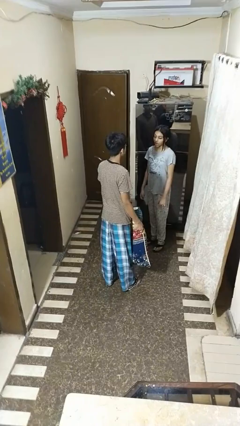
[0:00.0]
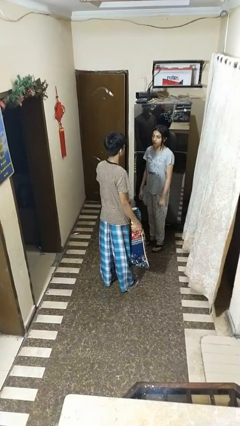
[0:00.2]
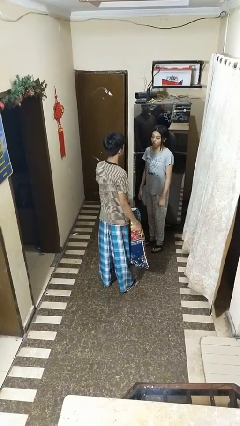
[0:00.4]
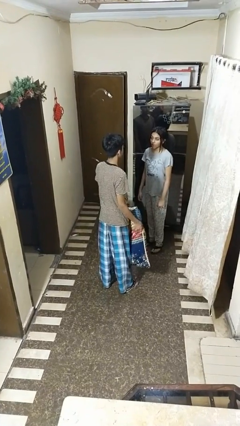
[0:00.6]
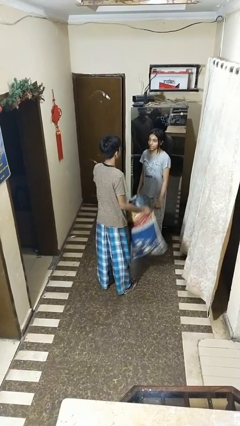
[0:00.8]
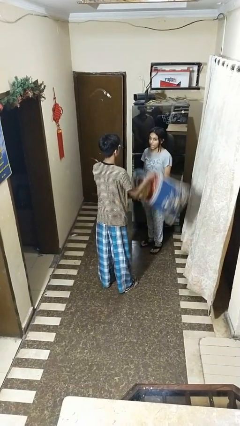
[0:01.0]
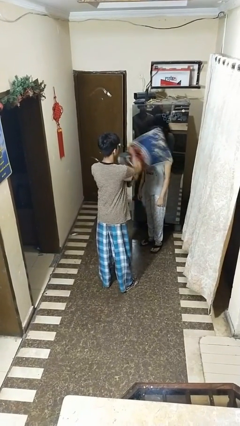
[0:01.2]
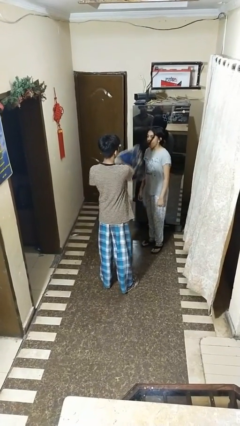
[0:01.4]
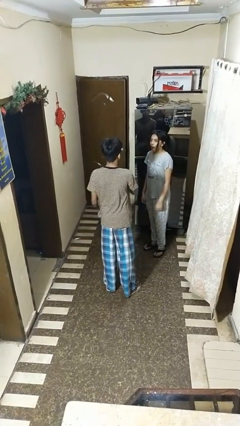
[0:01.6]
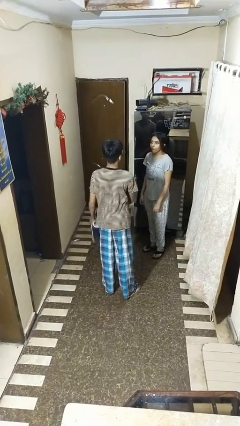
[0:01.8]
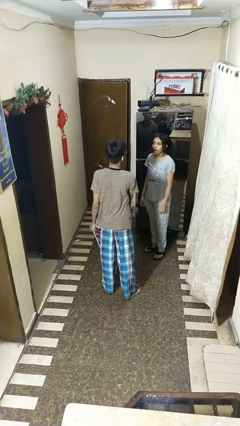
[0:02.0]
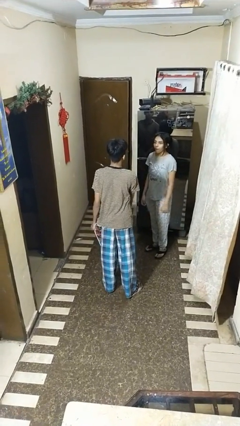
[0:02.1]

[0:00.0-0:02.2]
person hits person with pillow

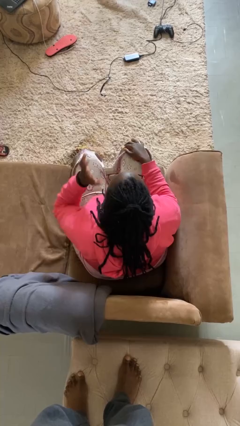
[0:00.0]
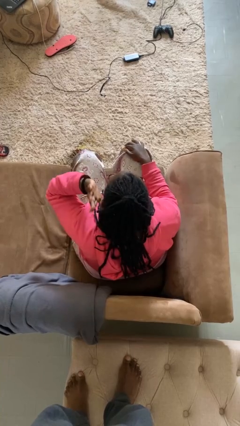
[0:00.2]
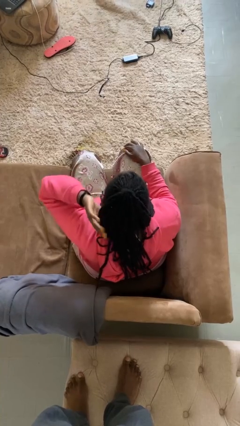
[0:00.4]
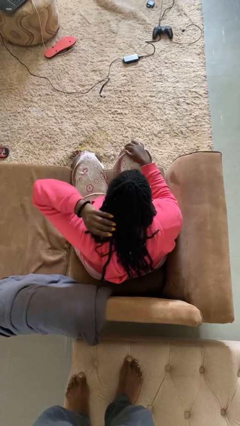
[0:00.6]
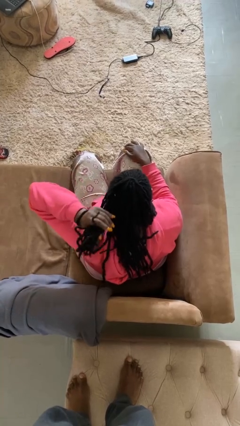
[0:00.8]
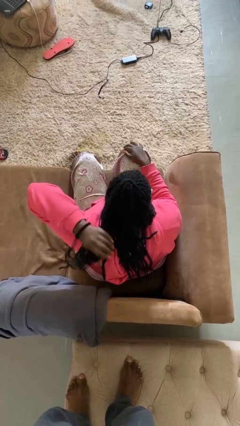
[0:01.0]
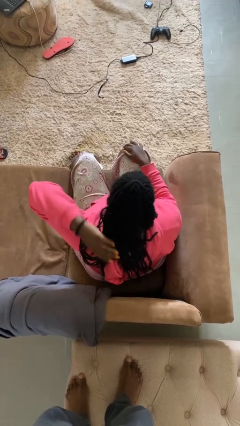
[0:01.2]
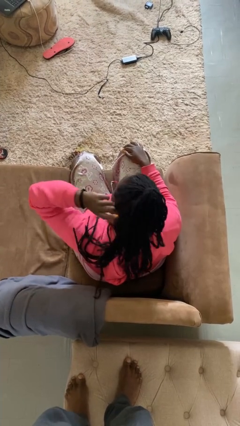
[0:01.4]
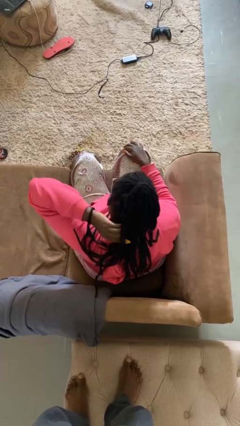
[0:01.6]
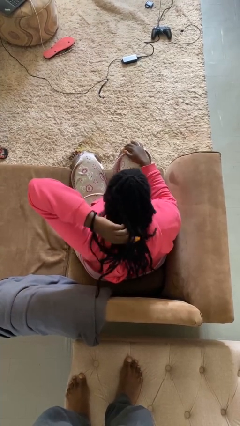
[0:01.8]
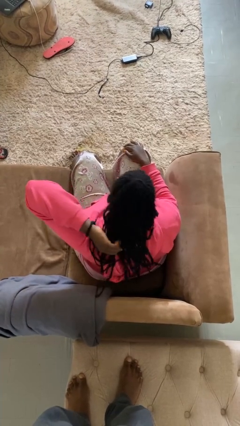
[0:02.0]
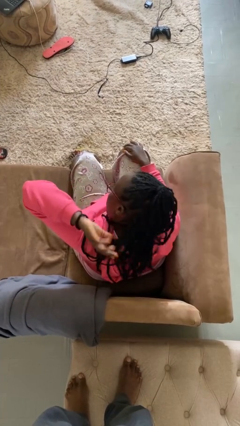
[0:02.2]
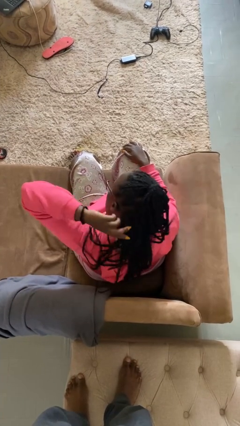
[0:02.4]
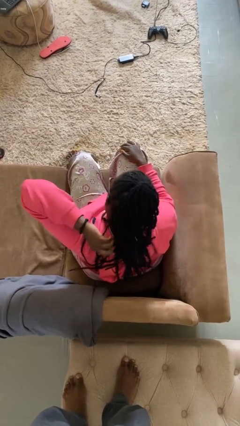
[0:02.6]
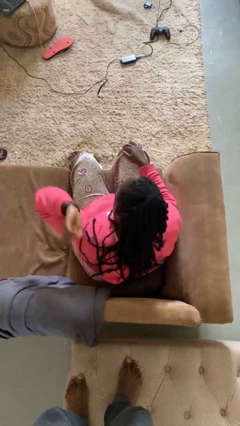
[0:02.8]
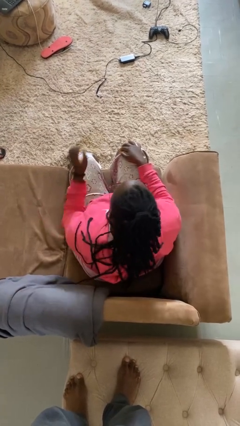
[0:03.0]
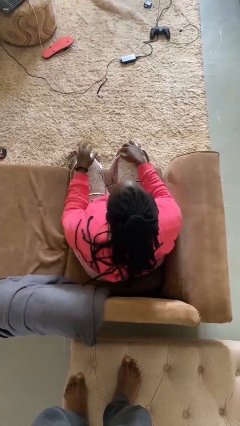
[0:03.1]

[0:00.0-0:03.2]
person strokes hair

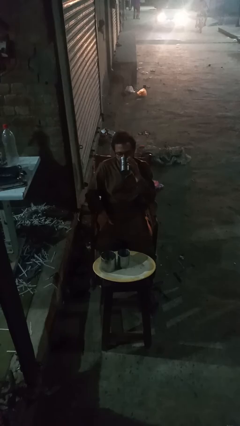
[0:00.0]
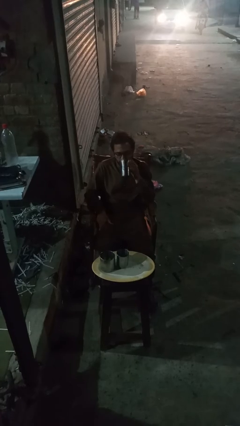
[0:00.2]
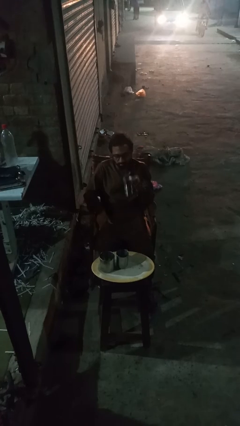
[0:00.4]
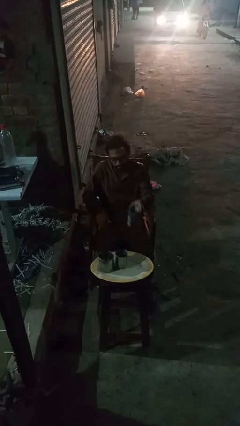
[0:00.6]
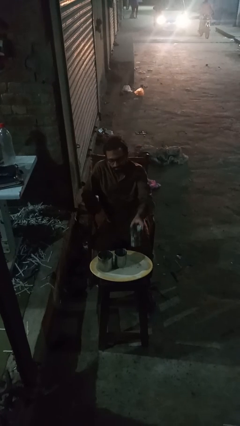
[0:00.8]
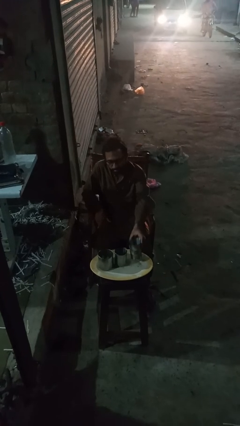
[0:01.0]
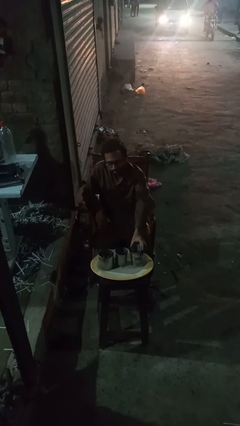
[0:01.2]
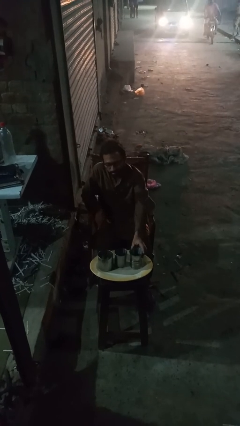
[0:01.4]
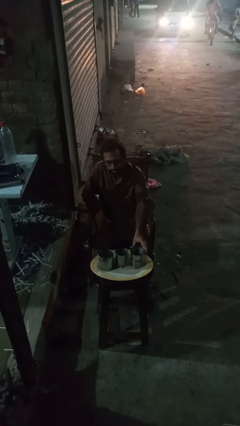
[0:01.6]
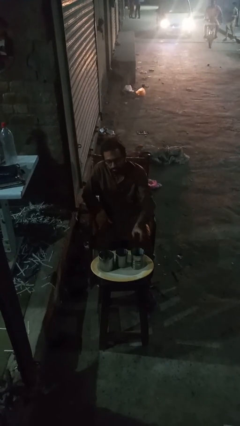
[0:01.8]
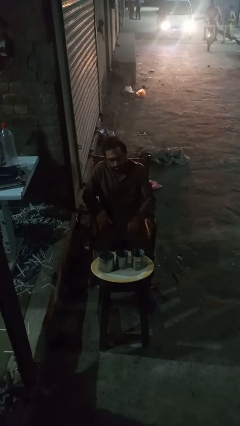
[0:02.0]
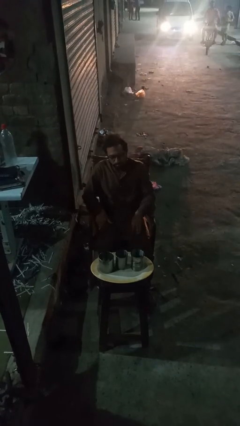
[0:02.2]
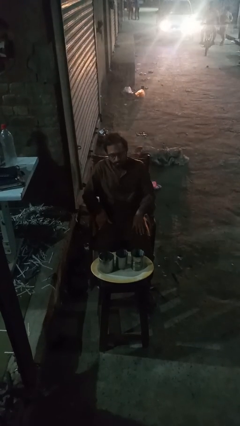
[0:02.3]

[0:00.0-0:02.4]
person puts down object on table

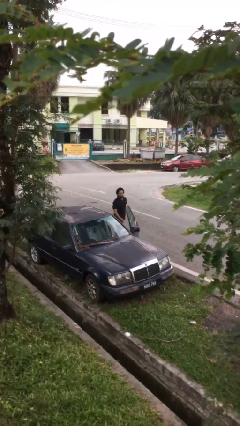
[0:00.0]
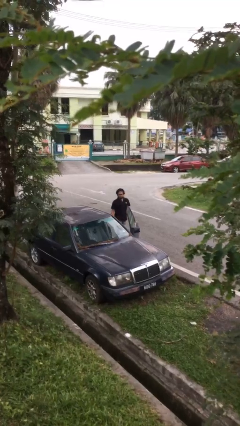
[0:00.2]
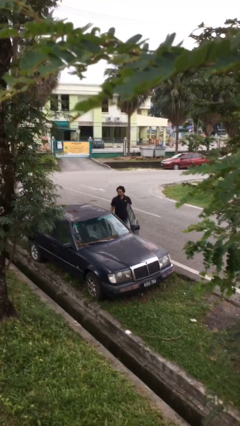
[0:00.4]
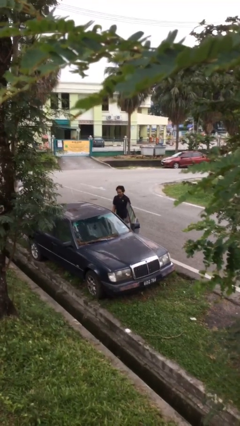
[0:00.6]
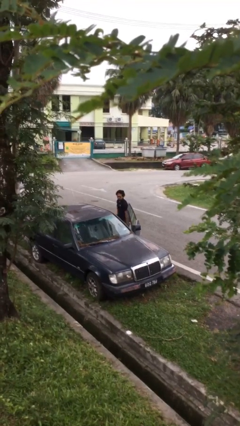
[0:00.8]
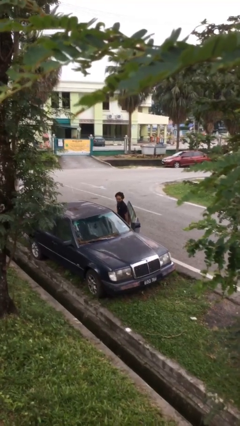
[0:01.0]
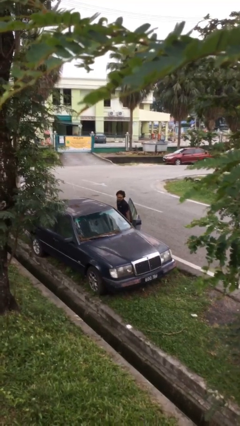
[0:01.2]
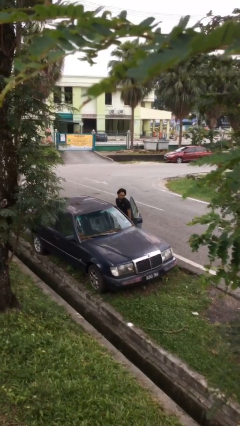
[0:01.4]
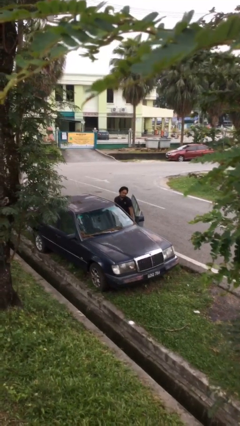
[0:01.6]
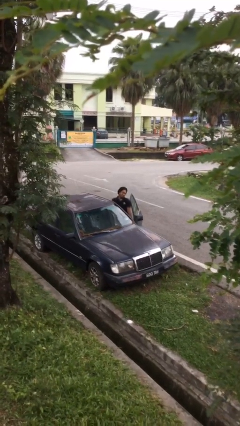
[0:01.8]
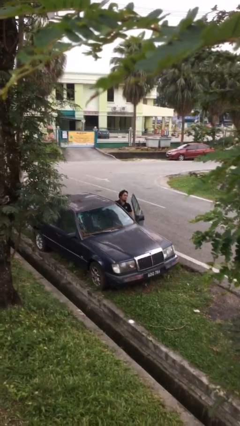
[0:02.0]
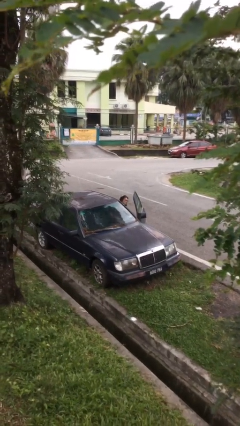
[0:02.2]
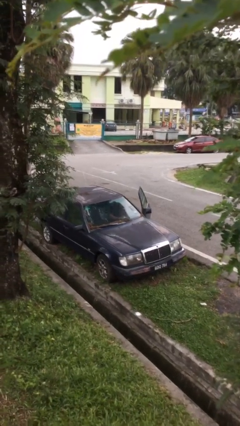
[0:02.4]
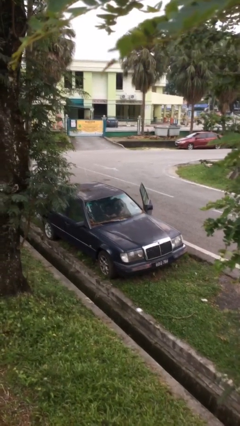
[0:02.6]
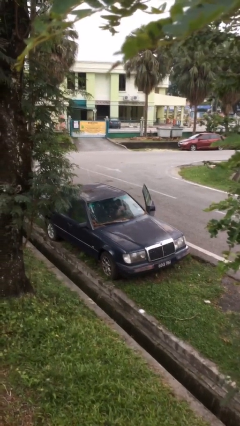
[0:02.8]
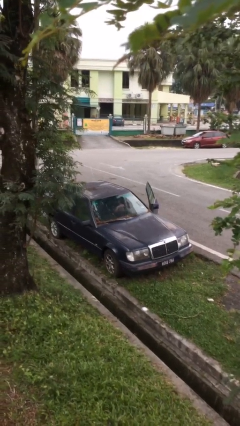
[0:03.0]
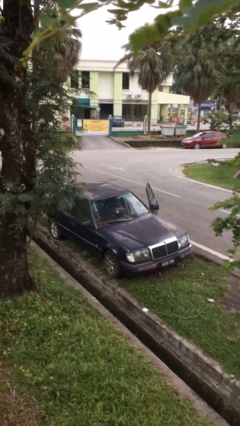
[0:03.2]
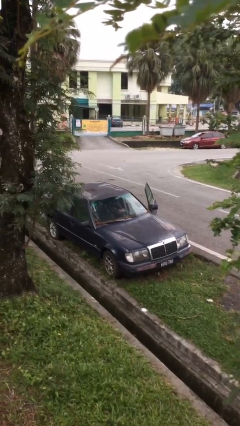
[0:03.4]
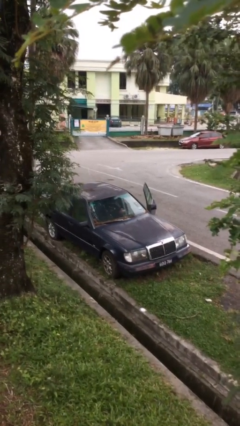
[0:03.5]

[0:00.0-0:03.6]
person enters car

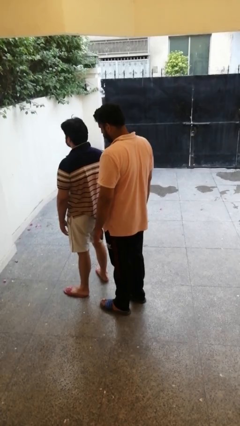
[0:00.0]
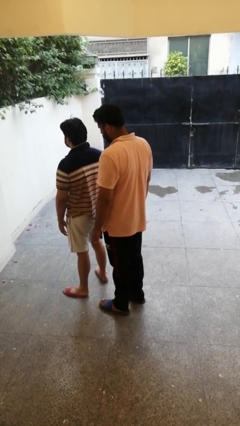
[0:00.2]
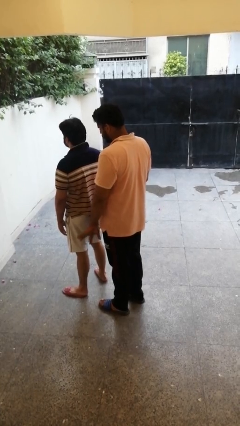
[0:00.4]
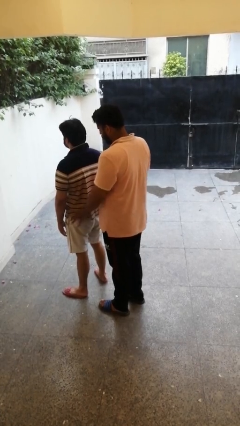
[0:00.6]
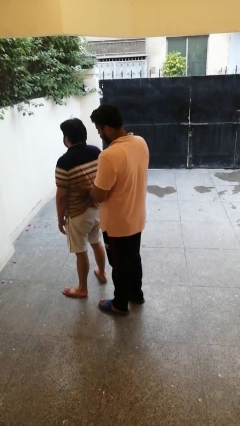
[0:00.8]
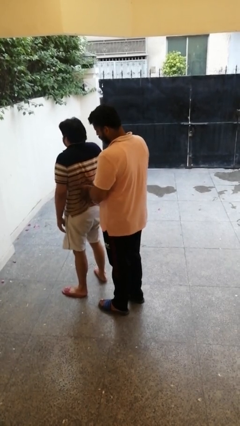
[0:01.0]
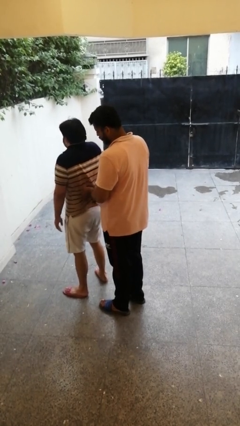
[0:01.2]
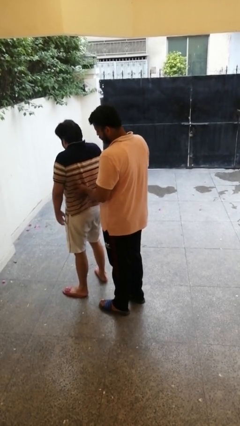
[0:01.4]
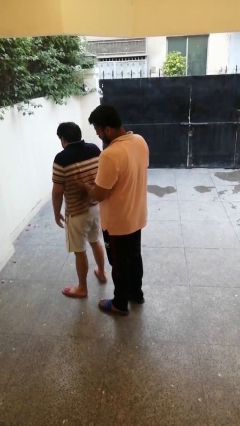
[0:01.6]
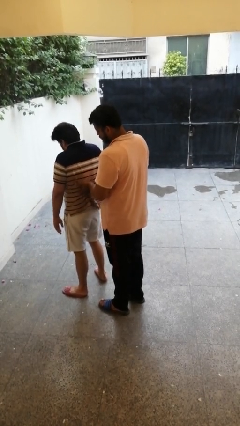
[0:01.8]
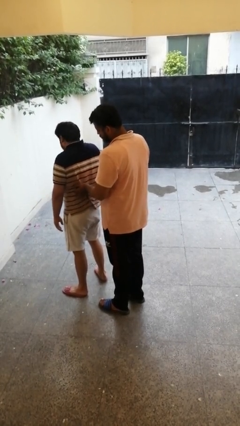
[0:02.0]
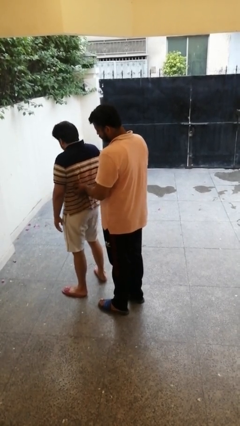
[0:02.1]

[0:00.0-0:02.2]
person tickles person

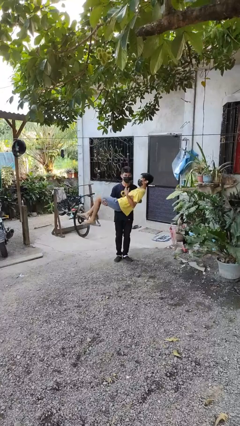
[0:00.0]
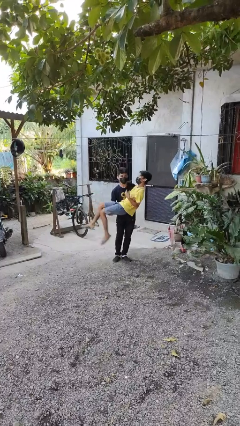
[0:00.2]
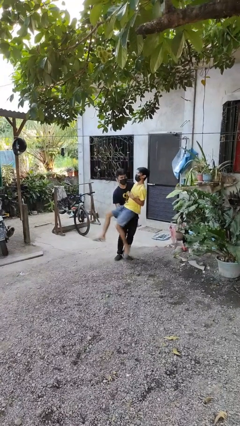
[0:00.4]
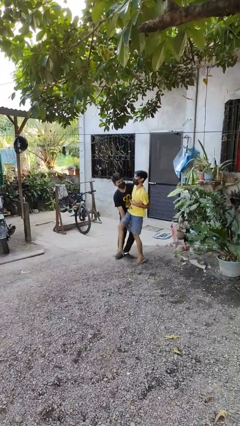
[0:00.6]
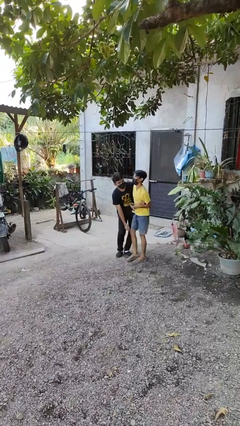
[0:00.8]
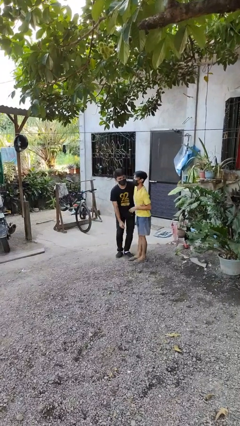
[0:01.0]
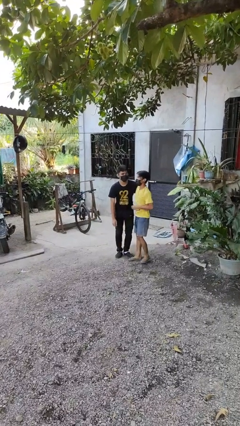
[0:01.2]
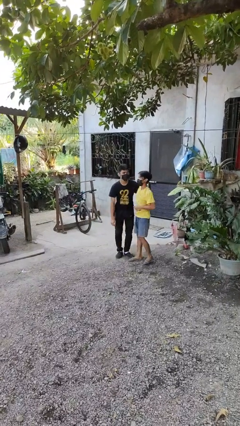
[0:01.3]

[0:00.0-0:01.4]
person puts down person

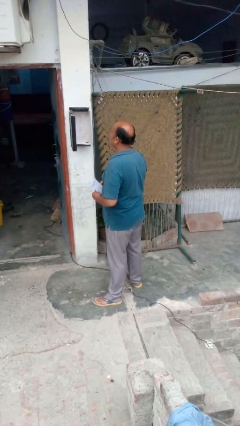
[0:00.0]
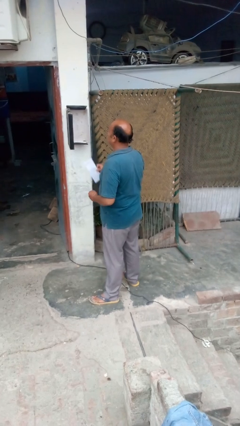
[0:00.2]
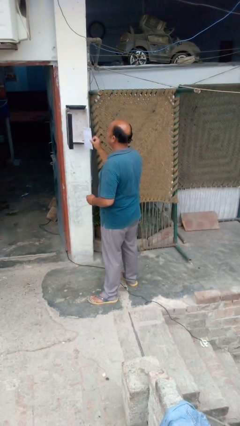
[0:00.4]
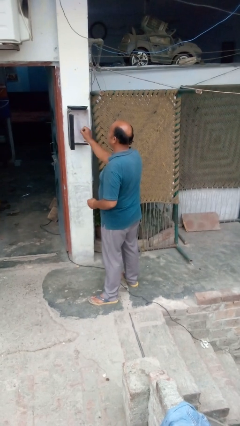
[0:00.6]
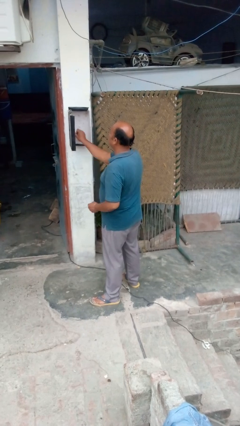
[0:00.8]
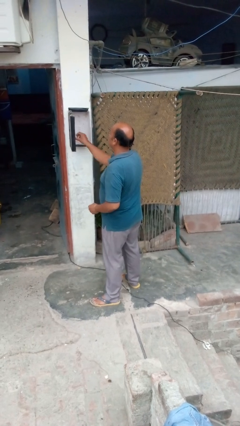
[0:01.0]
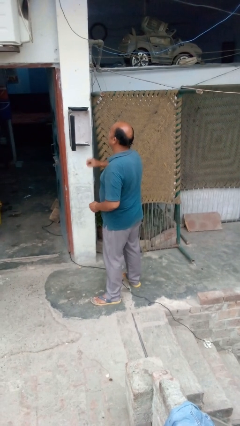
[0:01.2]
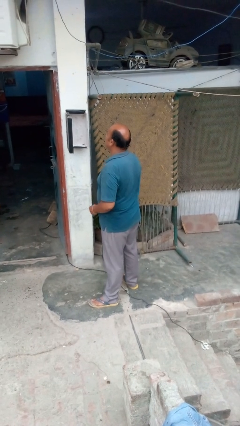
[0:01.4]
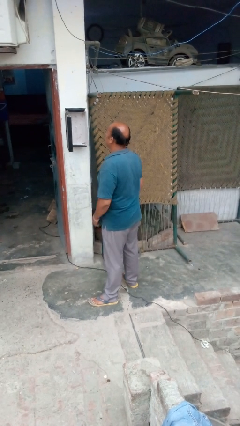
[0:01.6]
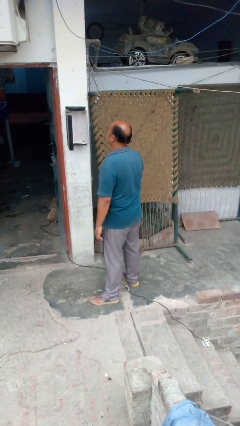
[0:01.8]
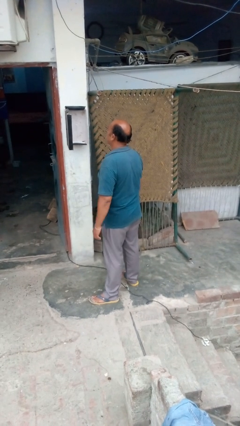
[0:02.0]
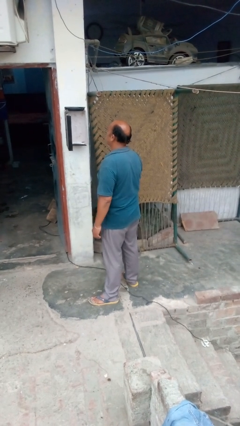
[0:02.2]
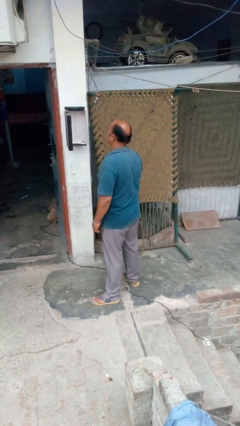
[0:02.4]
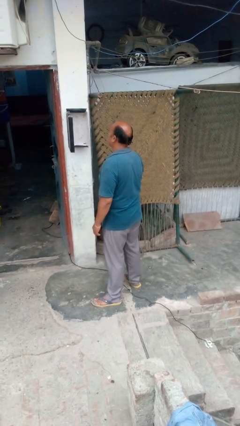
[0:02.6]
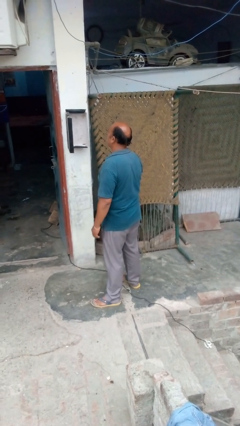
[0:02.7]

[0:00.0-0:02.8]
person puts letters in mailbox
